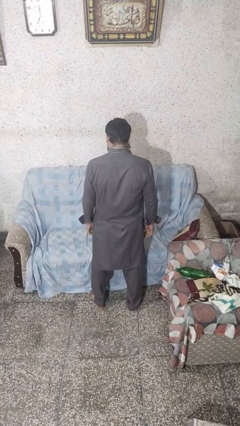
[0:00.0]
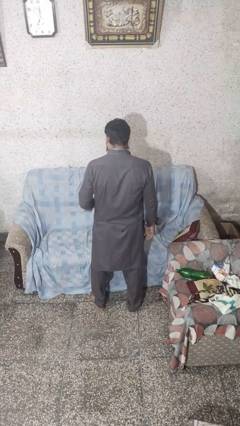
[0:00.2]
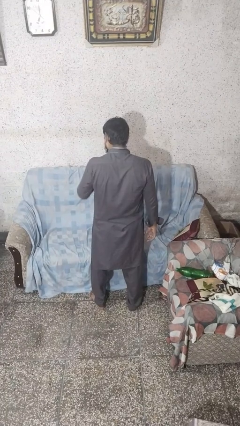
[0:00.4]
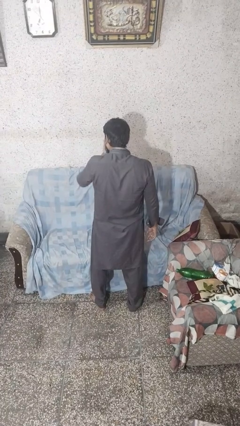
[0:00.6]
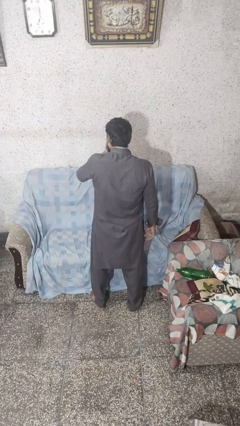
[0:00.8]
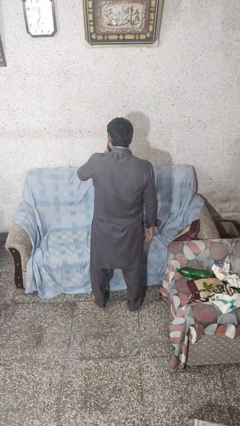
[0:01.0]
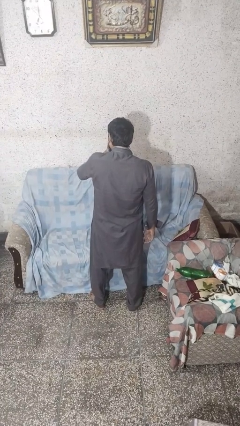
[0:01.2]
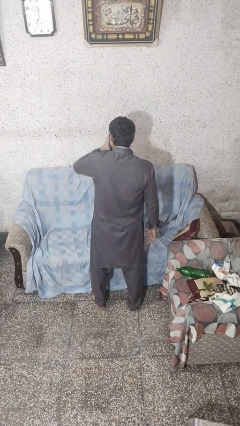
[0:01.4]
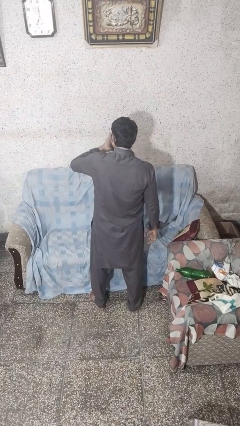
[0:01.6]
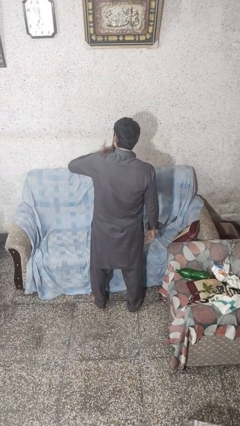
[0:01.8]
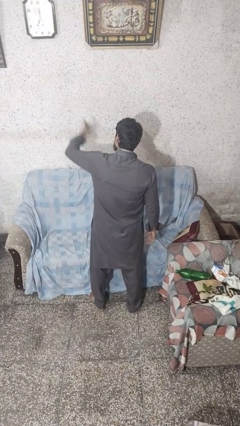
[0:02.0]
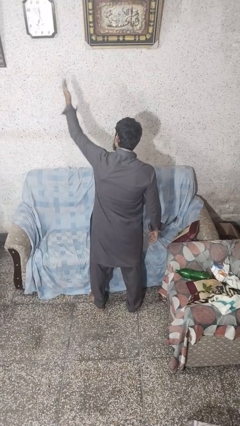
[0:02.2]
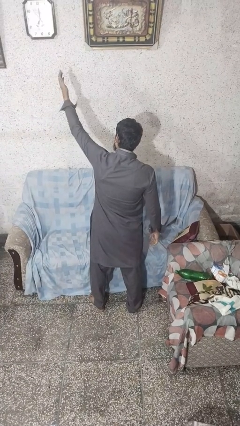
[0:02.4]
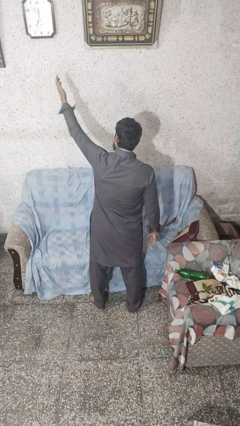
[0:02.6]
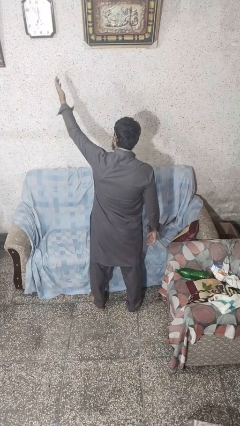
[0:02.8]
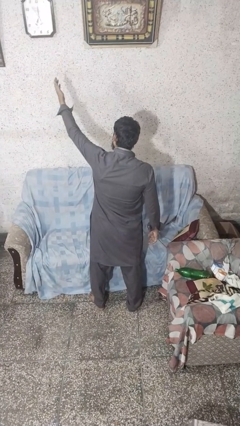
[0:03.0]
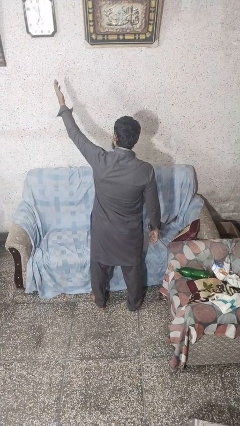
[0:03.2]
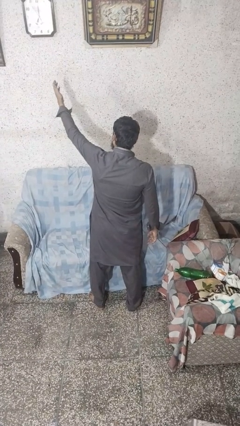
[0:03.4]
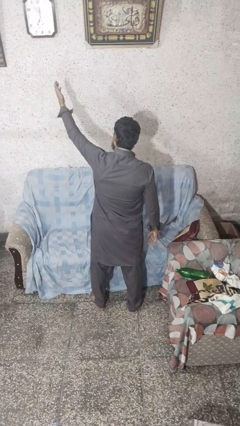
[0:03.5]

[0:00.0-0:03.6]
person gestures blow kiss

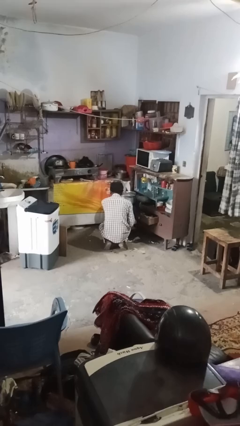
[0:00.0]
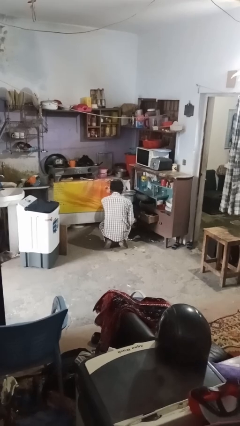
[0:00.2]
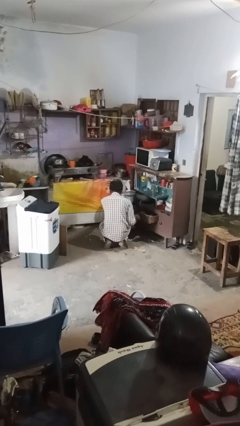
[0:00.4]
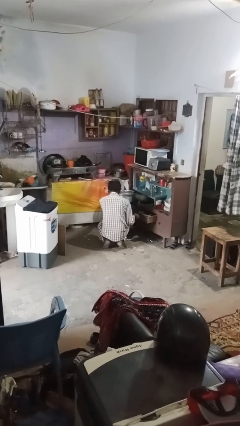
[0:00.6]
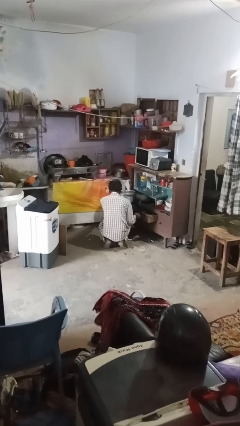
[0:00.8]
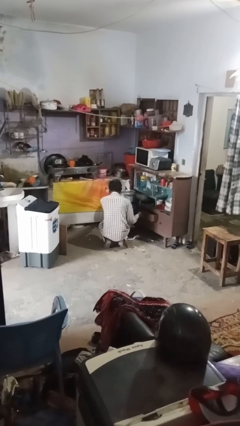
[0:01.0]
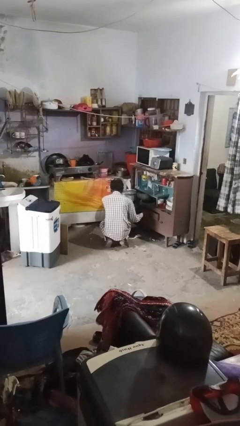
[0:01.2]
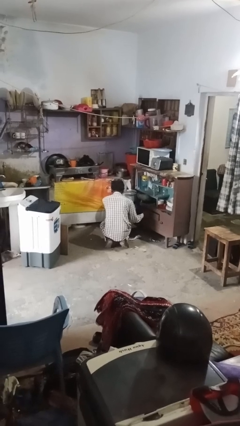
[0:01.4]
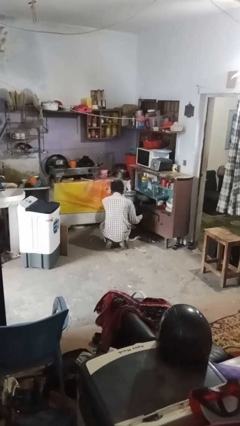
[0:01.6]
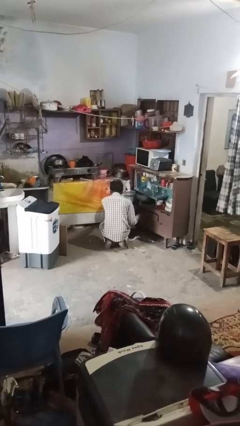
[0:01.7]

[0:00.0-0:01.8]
person closes kitchen drawer

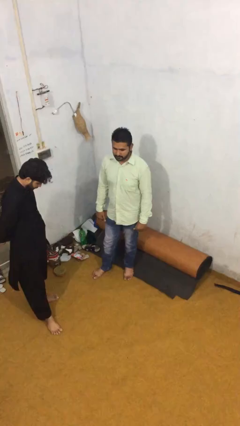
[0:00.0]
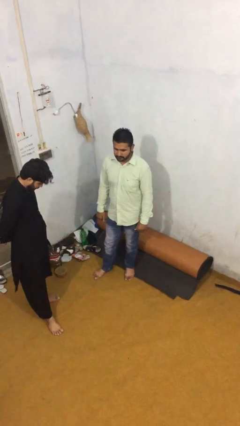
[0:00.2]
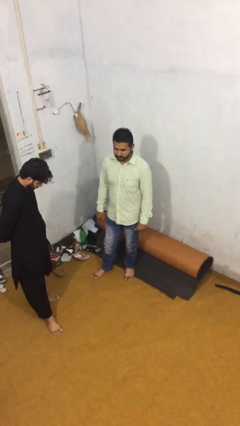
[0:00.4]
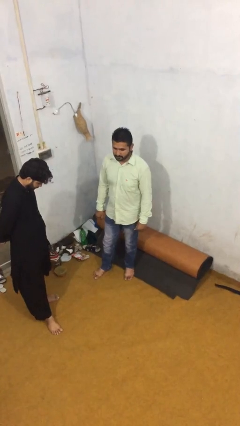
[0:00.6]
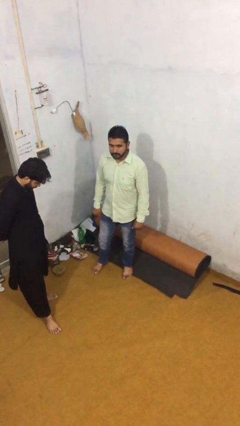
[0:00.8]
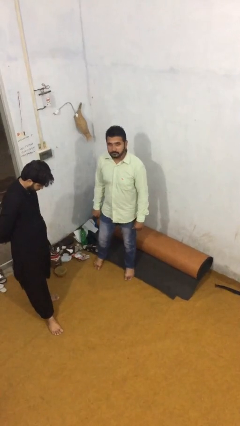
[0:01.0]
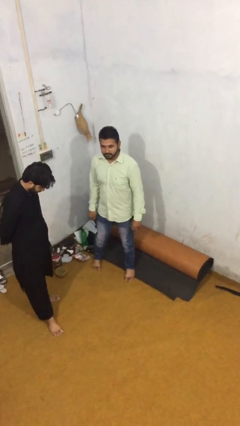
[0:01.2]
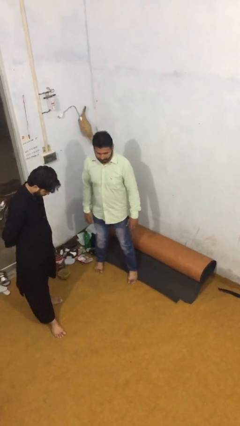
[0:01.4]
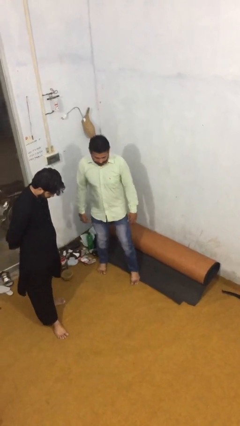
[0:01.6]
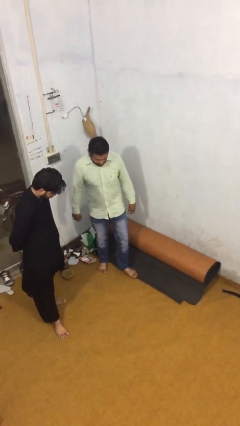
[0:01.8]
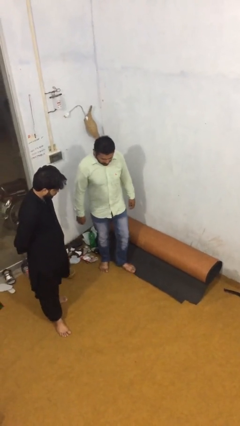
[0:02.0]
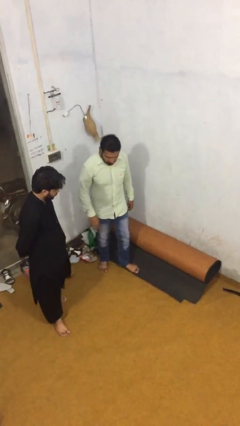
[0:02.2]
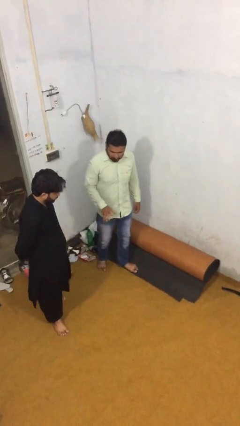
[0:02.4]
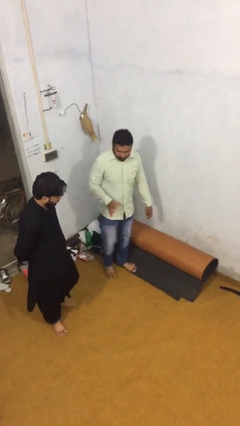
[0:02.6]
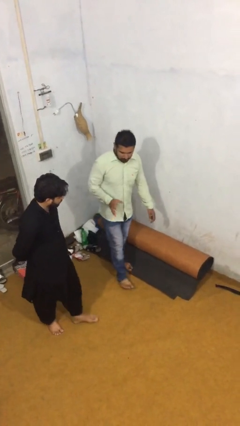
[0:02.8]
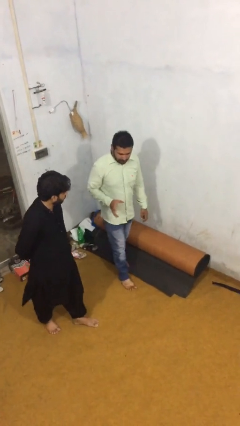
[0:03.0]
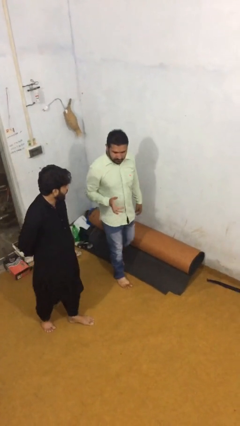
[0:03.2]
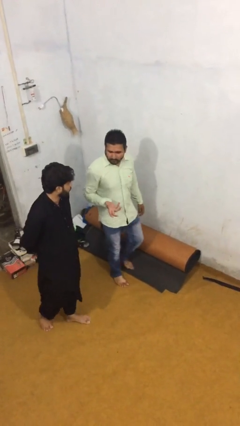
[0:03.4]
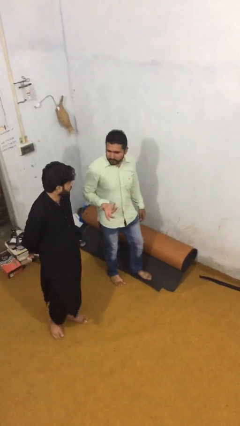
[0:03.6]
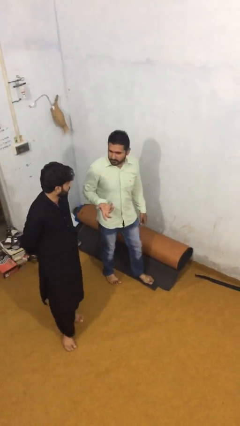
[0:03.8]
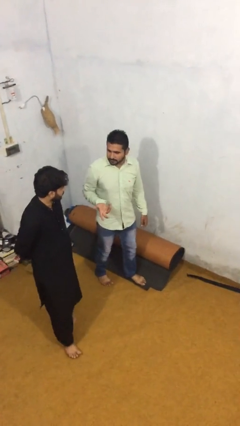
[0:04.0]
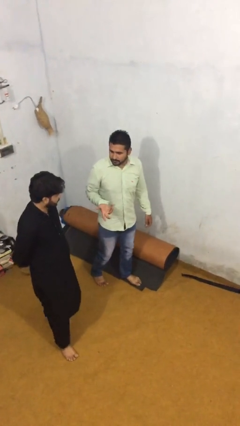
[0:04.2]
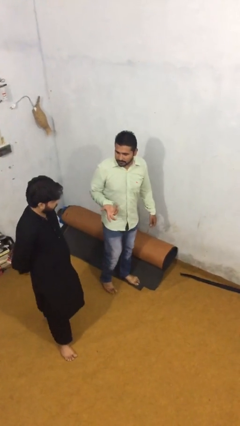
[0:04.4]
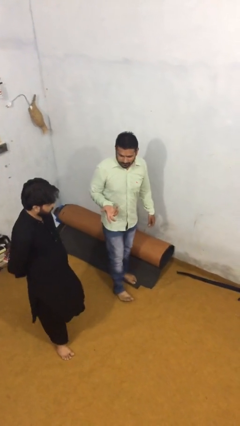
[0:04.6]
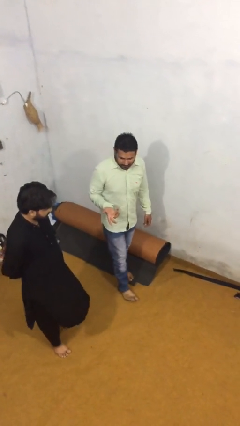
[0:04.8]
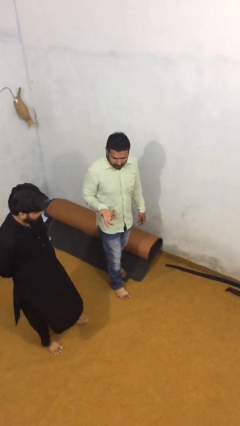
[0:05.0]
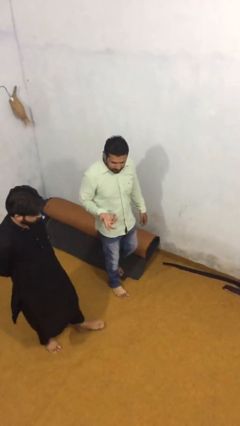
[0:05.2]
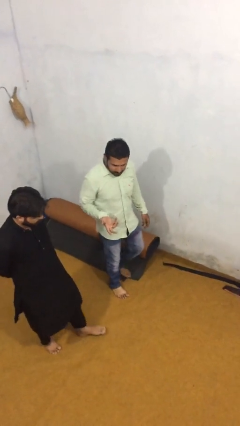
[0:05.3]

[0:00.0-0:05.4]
person talks to person

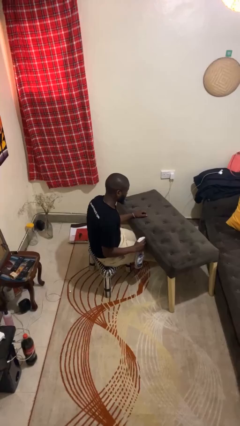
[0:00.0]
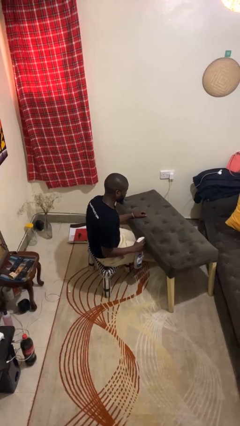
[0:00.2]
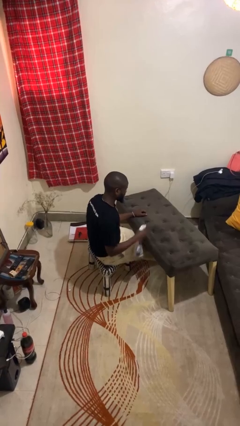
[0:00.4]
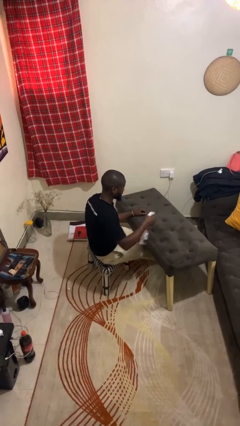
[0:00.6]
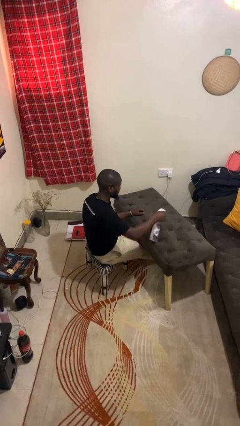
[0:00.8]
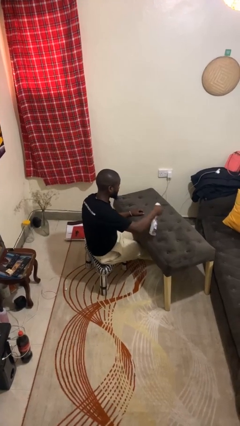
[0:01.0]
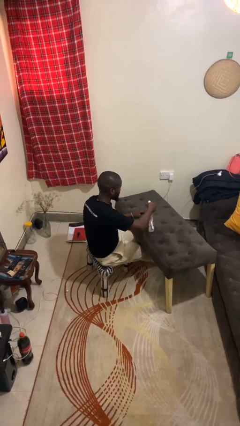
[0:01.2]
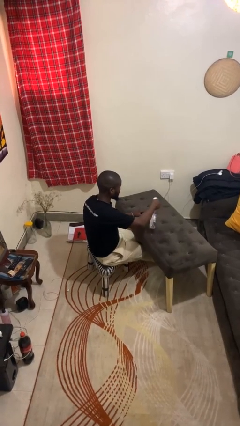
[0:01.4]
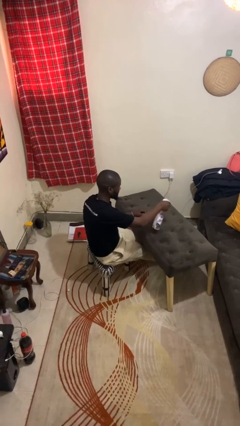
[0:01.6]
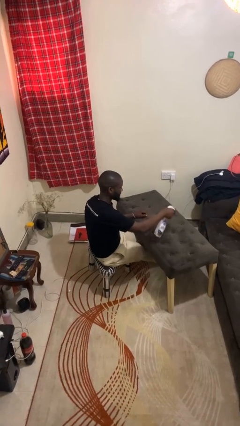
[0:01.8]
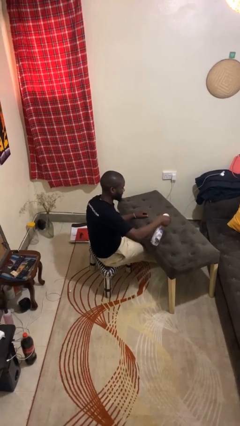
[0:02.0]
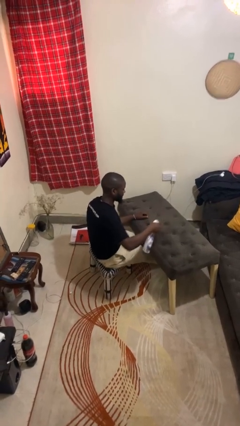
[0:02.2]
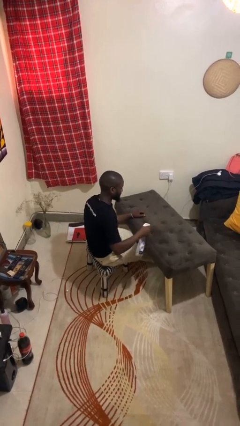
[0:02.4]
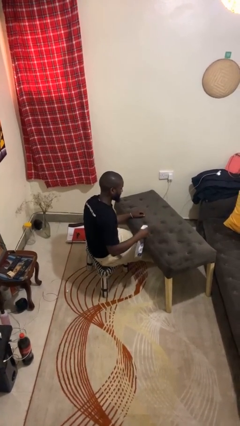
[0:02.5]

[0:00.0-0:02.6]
person sprays from bottle

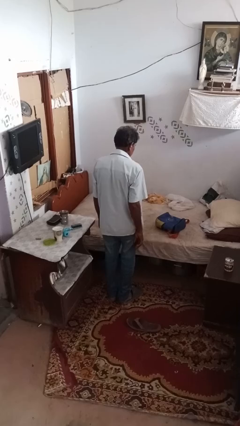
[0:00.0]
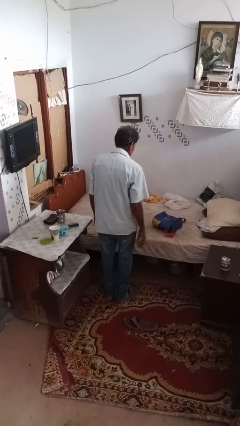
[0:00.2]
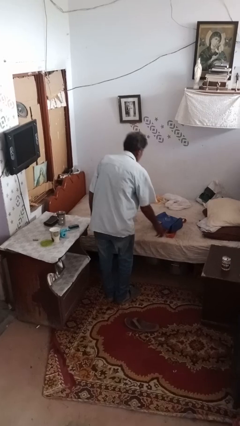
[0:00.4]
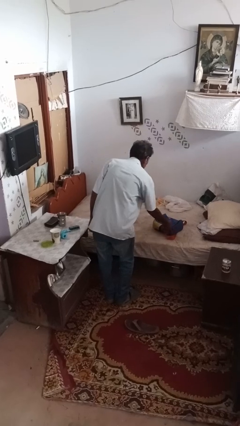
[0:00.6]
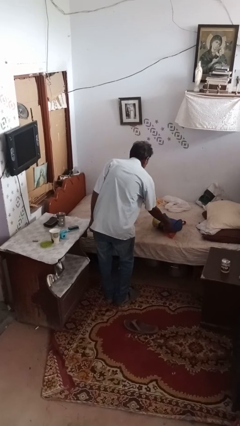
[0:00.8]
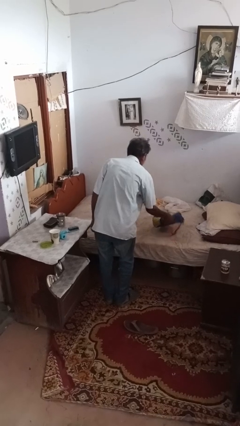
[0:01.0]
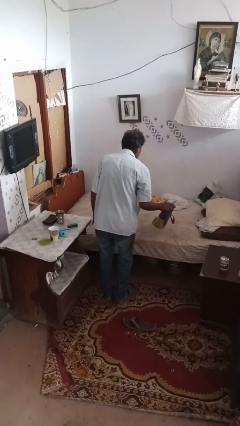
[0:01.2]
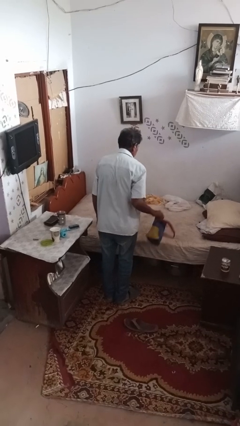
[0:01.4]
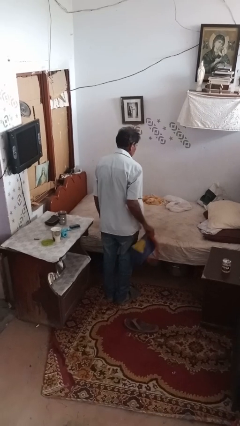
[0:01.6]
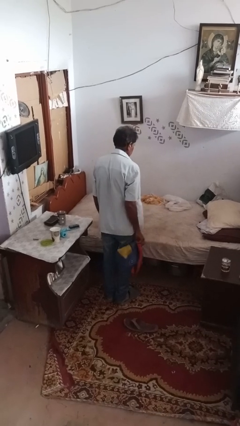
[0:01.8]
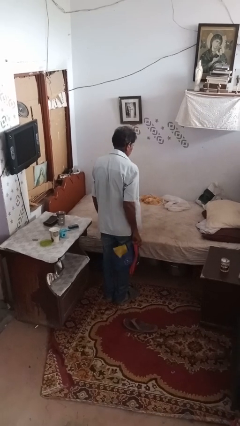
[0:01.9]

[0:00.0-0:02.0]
person picks up object from bed

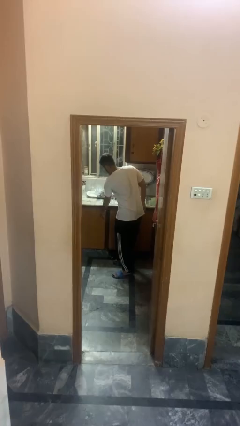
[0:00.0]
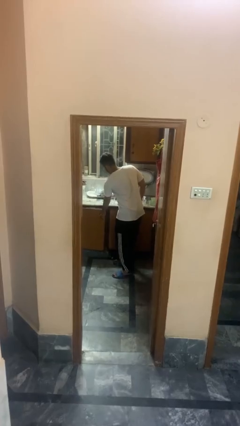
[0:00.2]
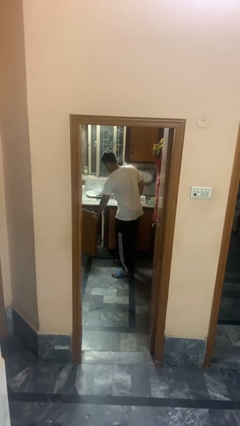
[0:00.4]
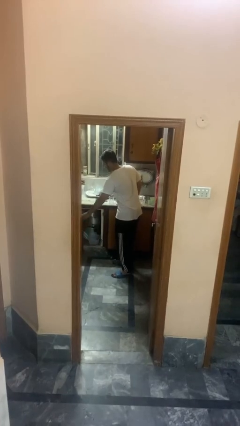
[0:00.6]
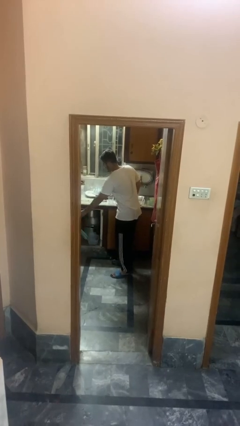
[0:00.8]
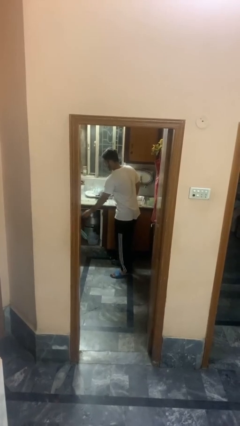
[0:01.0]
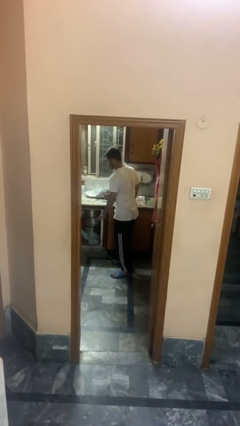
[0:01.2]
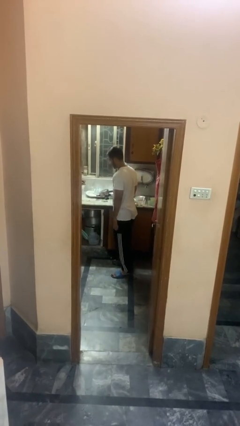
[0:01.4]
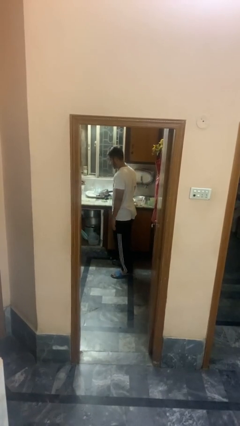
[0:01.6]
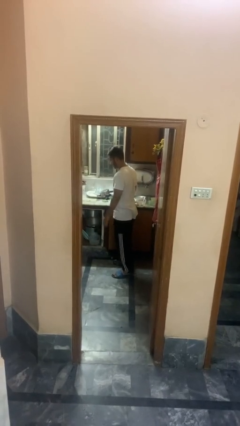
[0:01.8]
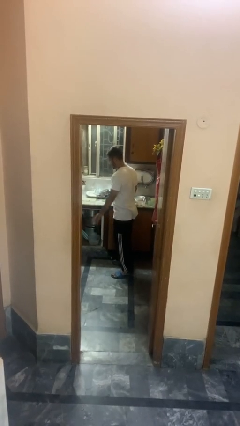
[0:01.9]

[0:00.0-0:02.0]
person opens cabinet

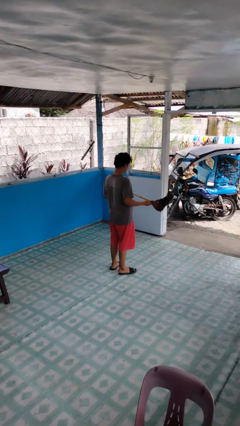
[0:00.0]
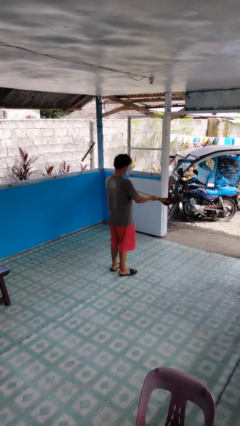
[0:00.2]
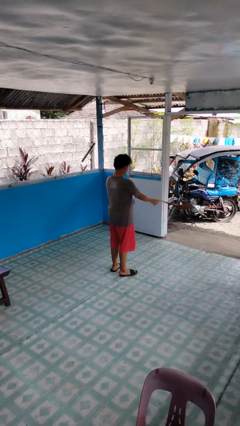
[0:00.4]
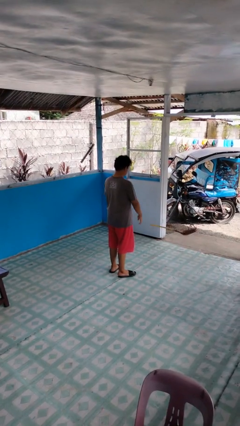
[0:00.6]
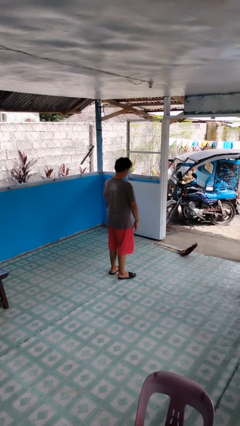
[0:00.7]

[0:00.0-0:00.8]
person throws object to ground
